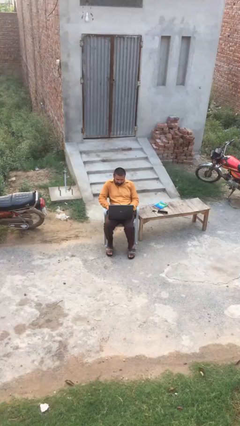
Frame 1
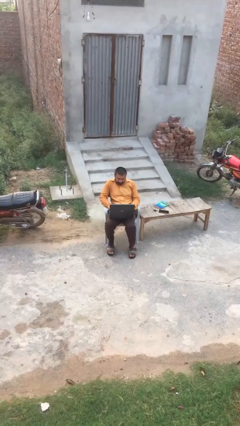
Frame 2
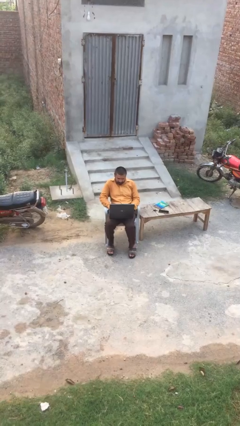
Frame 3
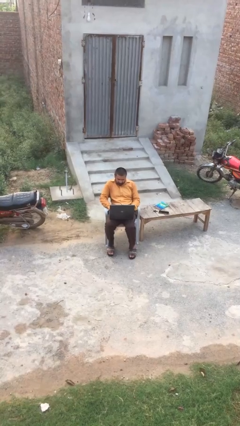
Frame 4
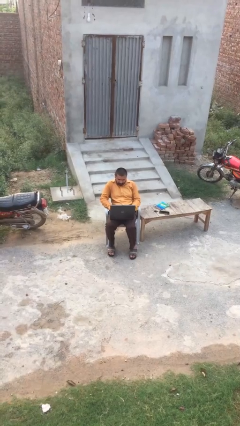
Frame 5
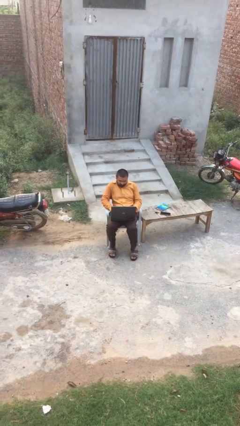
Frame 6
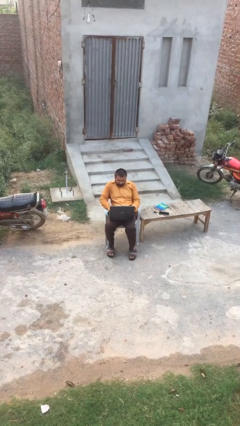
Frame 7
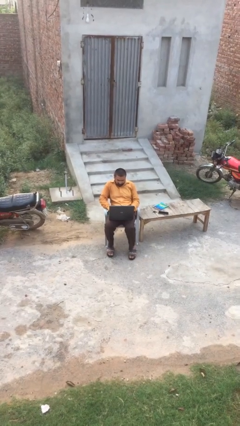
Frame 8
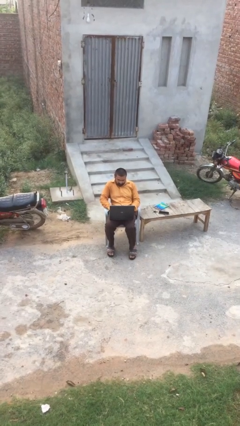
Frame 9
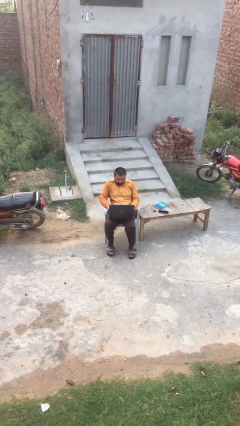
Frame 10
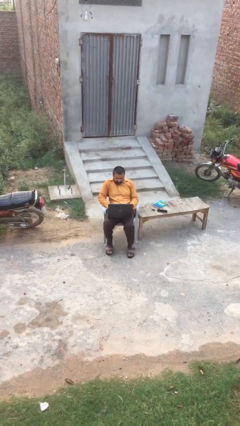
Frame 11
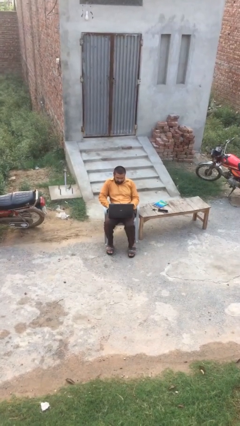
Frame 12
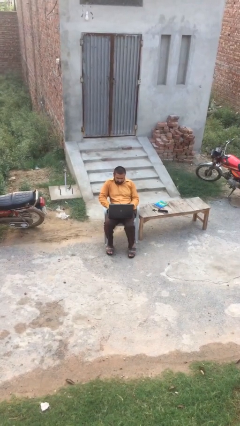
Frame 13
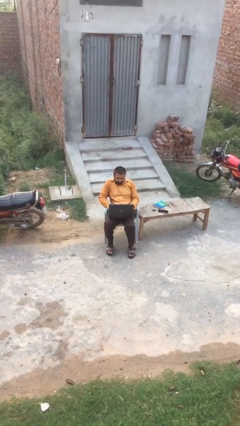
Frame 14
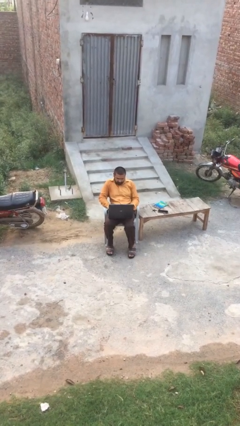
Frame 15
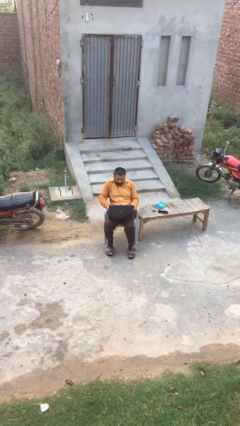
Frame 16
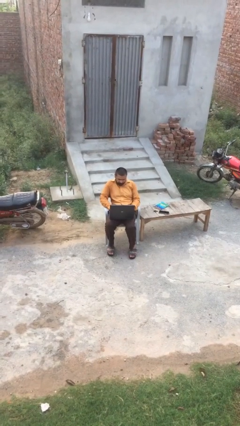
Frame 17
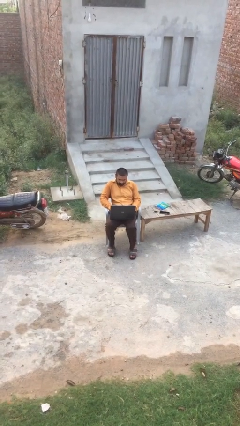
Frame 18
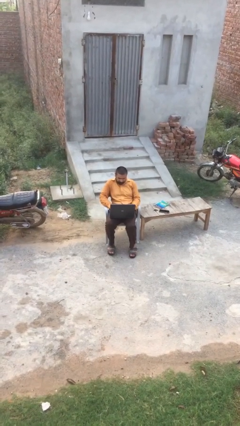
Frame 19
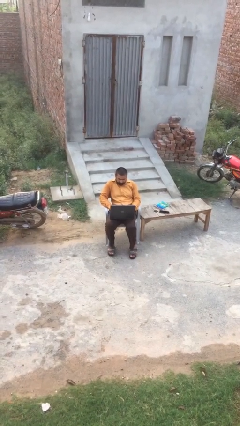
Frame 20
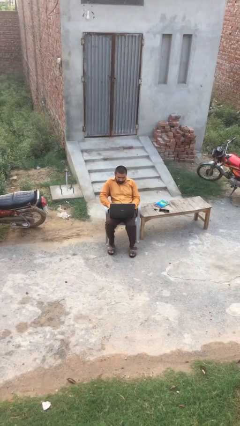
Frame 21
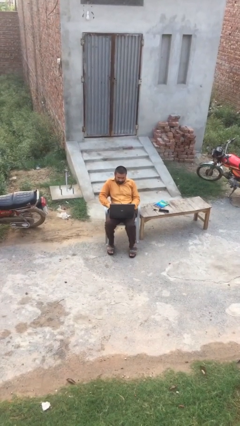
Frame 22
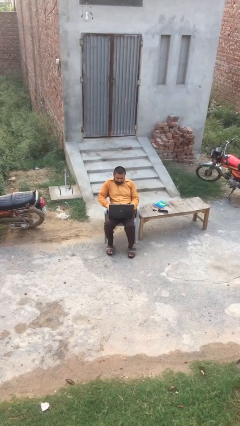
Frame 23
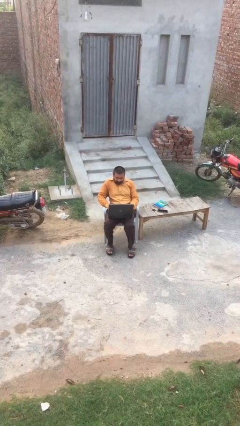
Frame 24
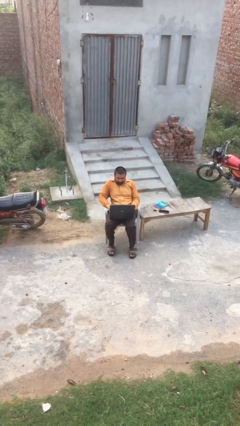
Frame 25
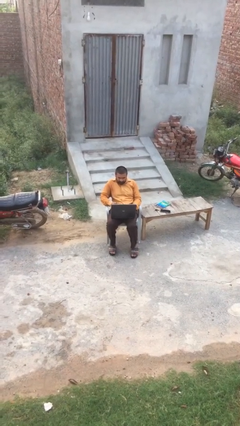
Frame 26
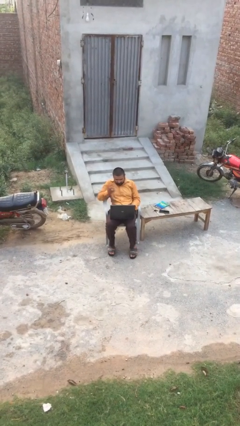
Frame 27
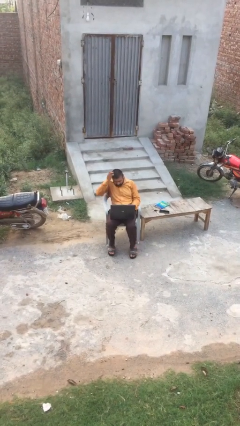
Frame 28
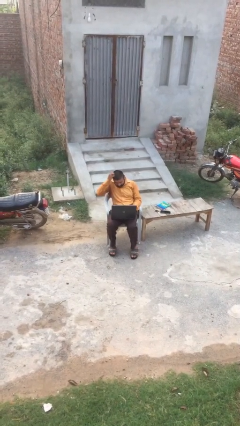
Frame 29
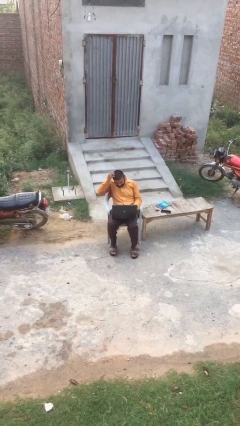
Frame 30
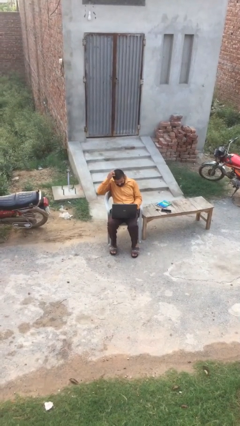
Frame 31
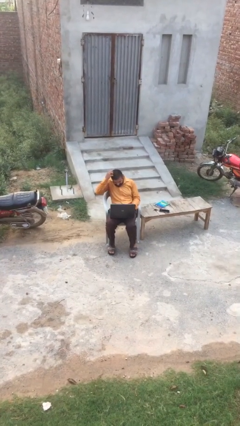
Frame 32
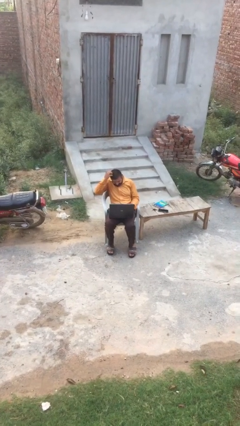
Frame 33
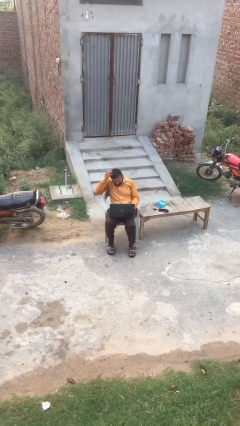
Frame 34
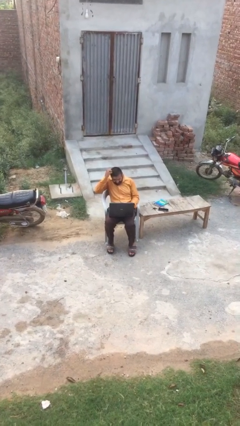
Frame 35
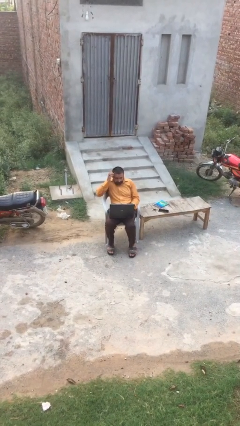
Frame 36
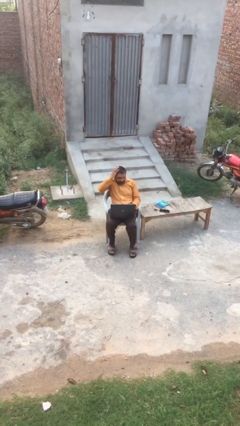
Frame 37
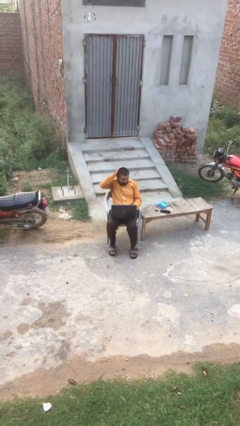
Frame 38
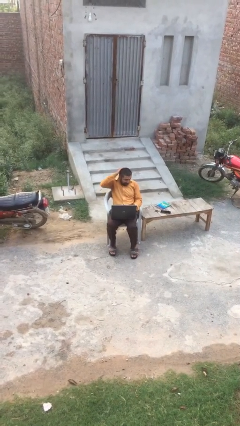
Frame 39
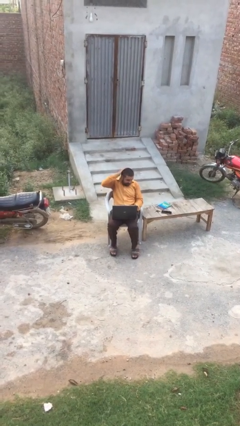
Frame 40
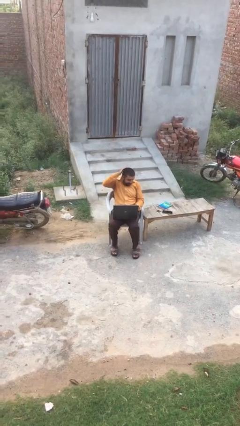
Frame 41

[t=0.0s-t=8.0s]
person interacts with laptop

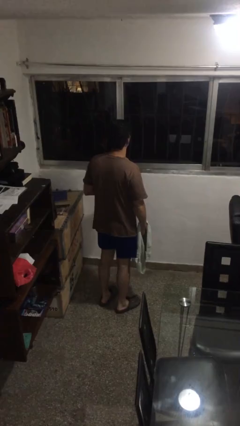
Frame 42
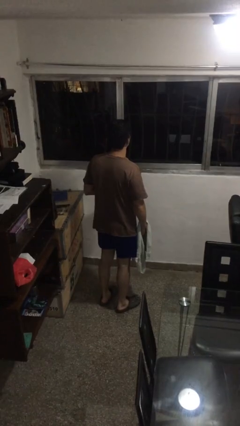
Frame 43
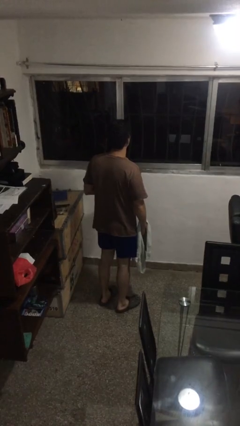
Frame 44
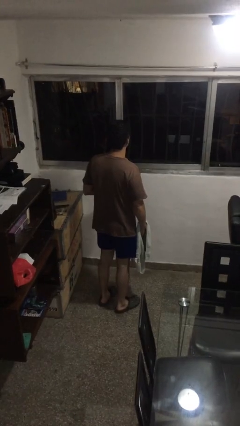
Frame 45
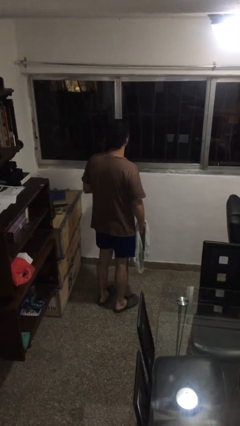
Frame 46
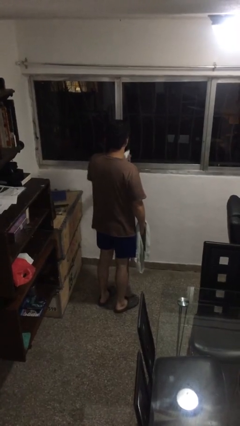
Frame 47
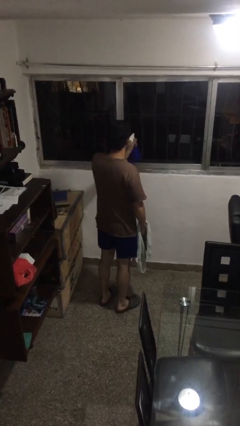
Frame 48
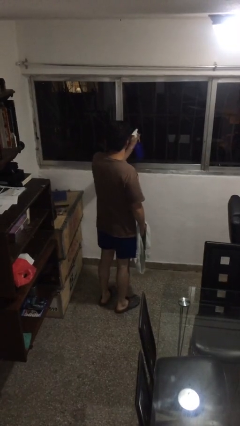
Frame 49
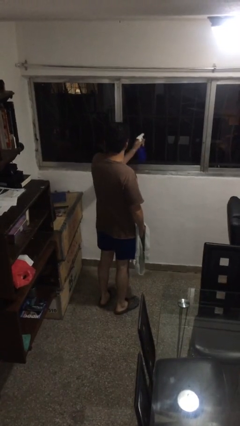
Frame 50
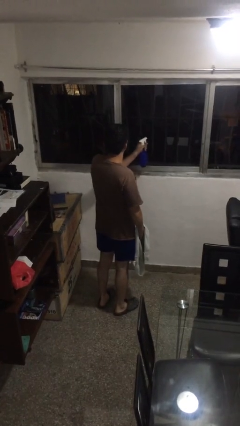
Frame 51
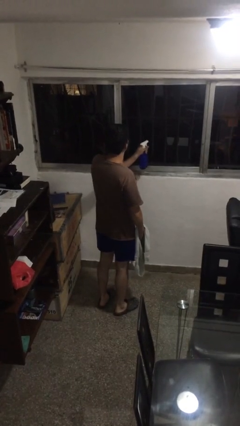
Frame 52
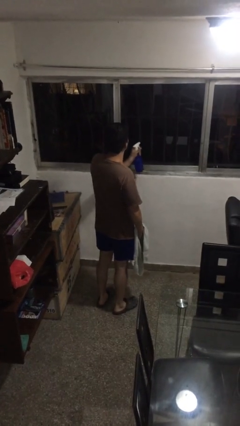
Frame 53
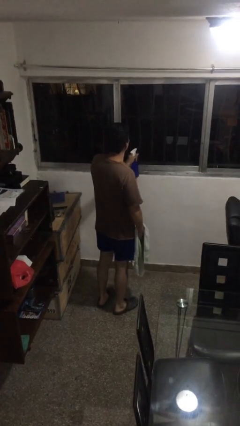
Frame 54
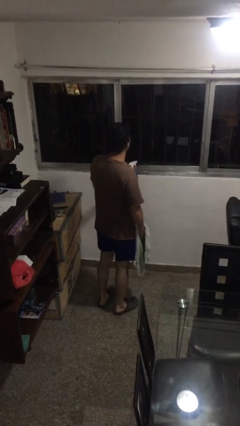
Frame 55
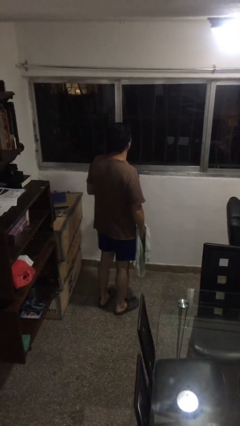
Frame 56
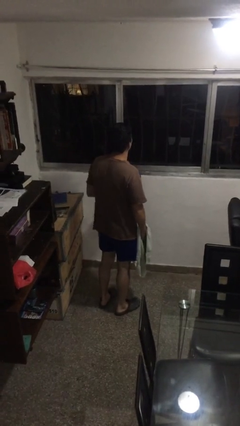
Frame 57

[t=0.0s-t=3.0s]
person sprays from bottle

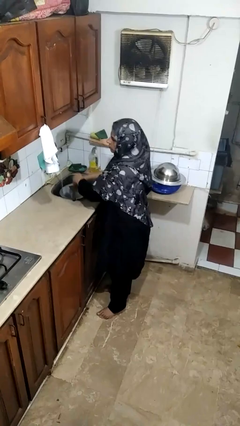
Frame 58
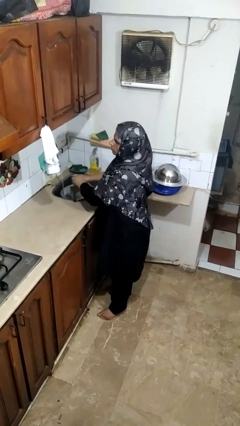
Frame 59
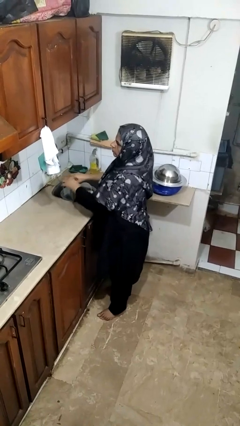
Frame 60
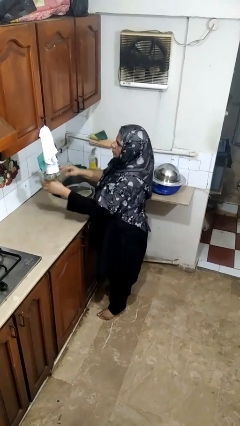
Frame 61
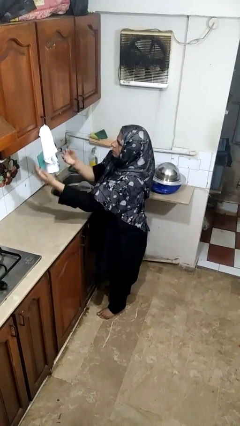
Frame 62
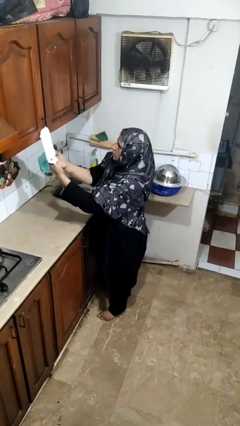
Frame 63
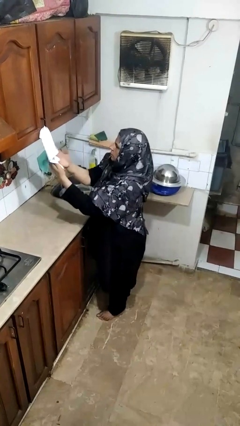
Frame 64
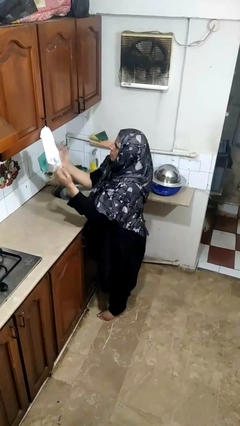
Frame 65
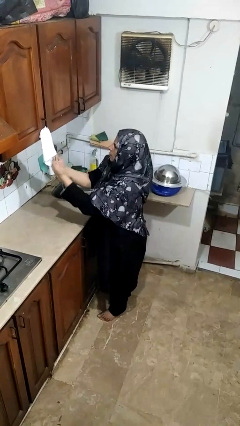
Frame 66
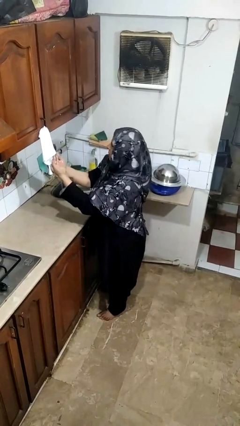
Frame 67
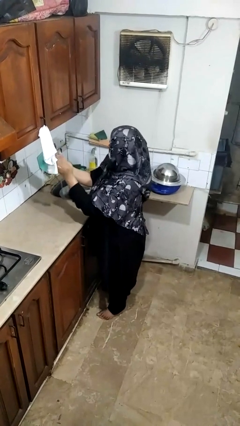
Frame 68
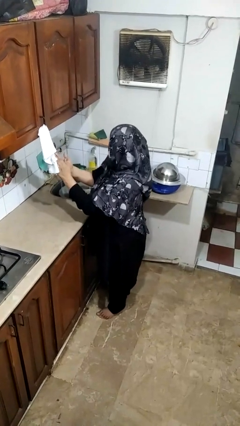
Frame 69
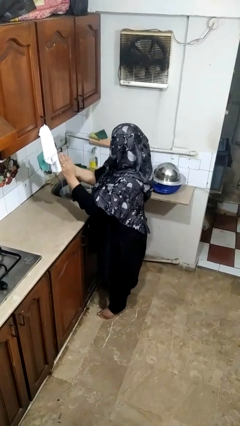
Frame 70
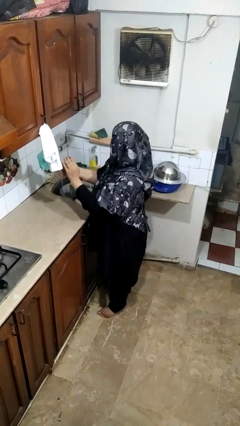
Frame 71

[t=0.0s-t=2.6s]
person dries hands with towel

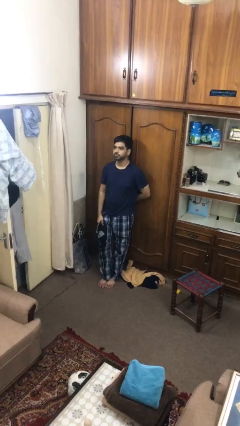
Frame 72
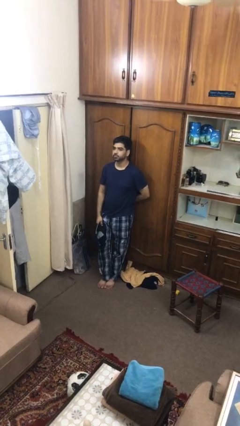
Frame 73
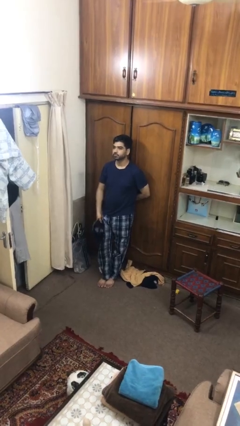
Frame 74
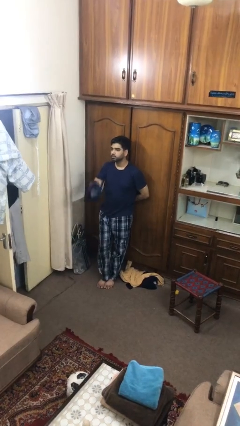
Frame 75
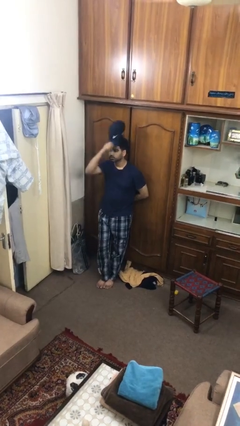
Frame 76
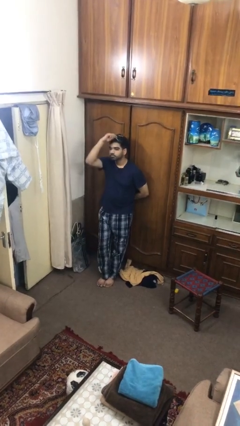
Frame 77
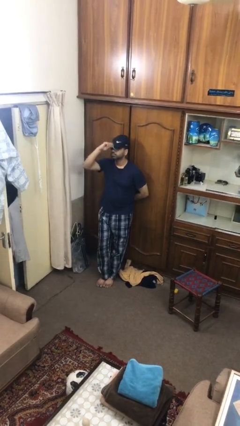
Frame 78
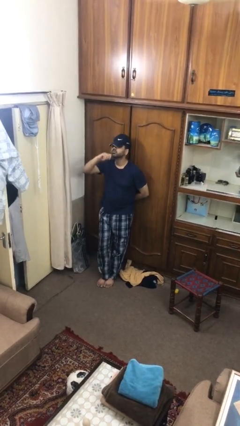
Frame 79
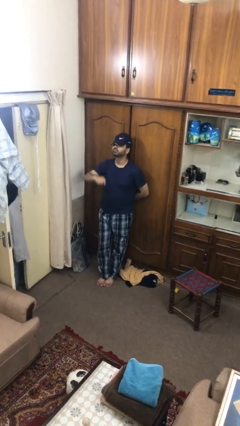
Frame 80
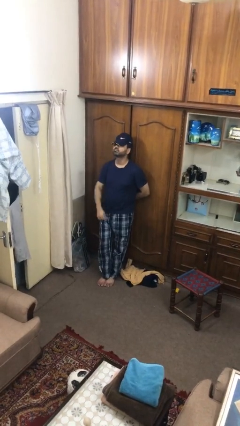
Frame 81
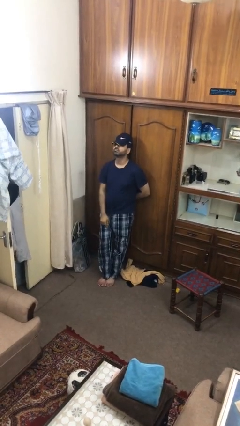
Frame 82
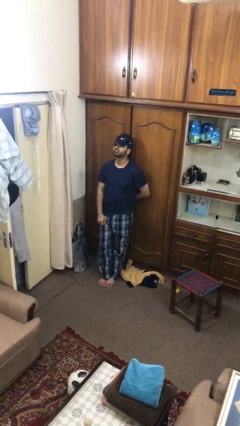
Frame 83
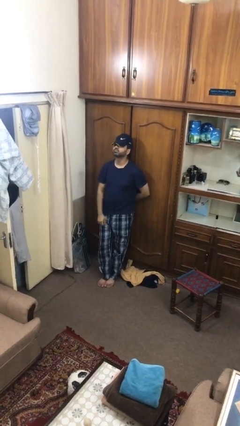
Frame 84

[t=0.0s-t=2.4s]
person puts on hat

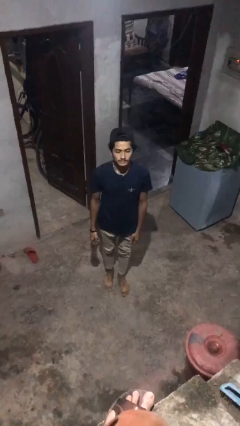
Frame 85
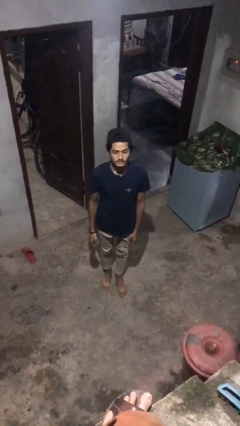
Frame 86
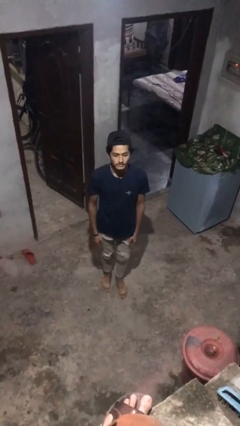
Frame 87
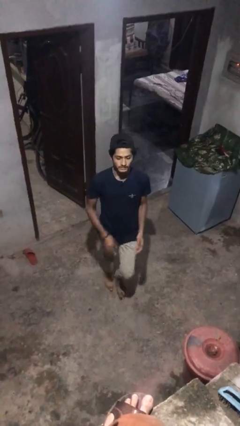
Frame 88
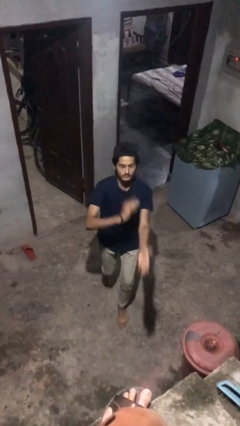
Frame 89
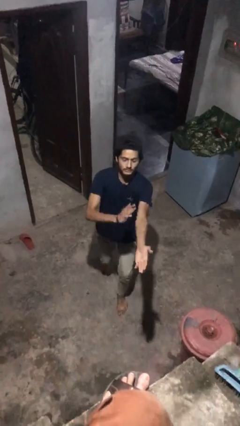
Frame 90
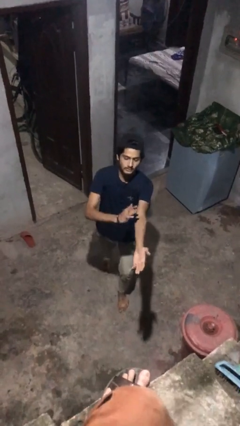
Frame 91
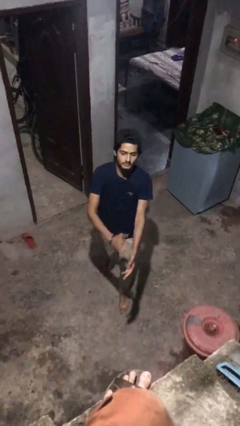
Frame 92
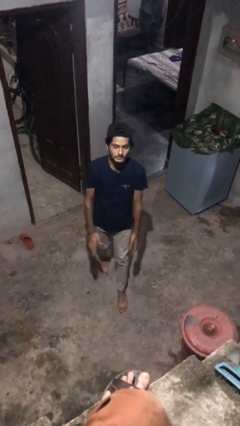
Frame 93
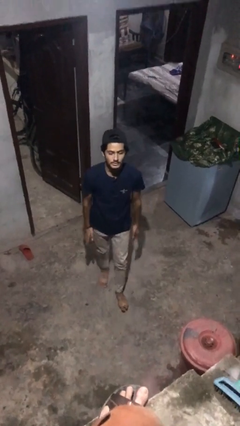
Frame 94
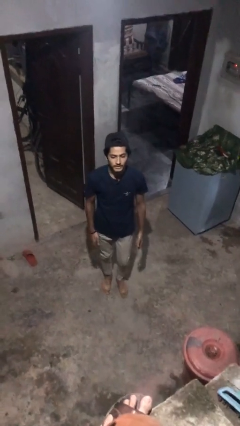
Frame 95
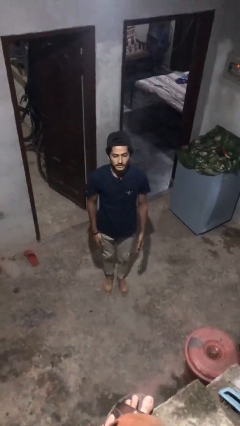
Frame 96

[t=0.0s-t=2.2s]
person karate chop
